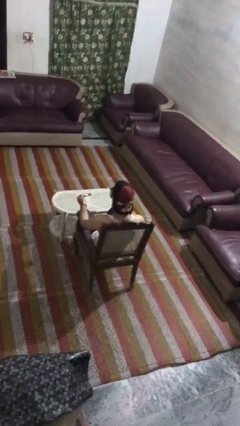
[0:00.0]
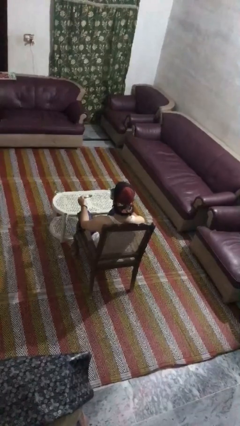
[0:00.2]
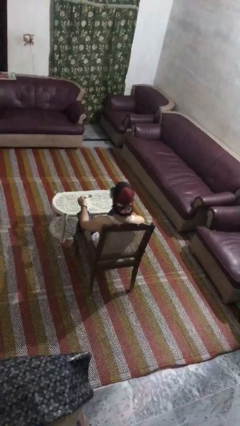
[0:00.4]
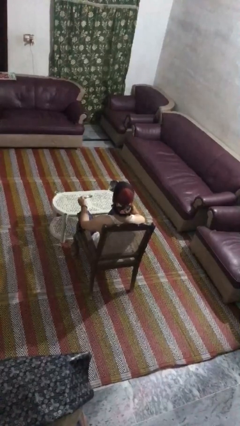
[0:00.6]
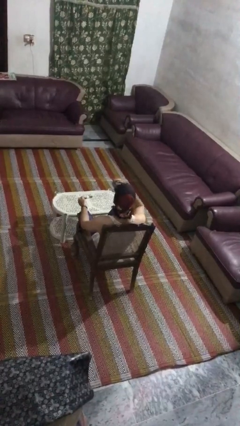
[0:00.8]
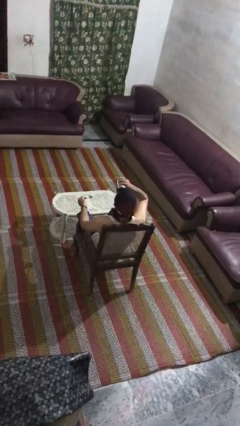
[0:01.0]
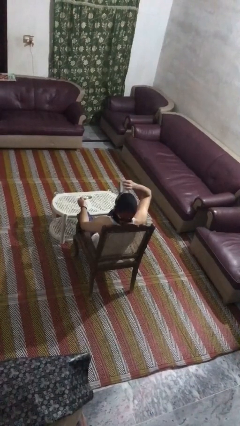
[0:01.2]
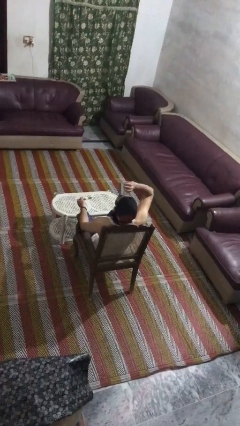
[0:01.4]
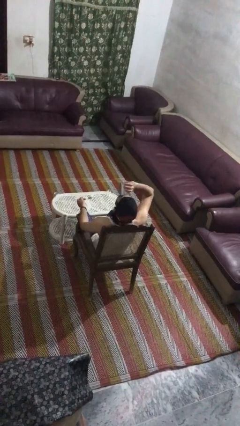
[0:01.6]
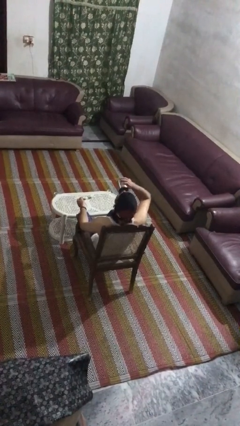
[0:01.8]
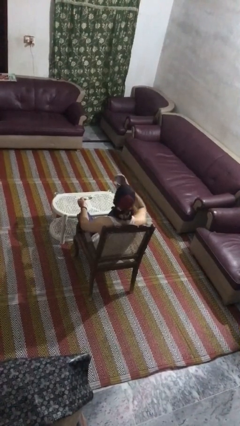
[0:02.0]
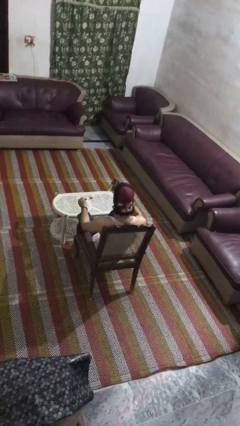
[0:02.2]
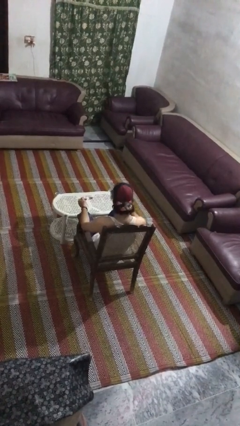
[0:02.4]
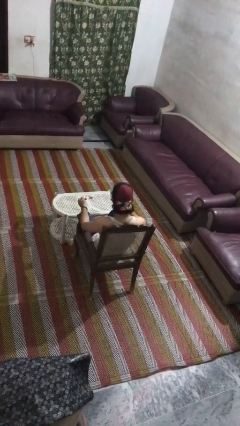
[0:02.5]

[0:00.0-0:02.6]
person drinks from mug

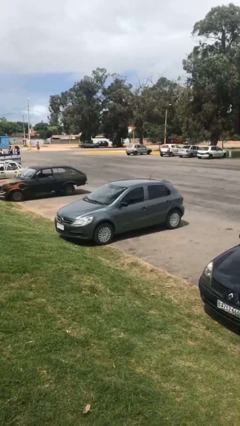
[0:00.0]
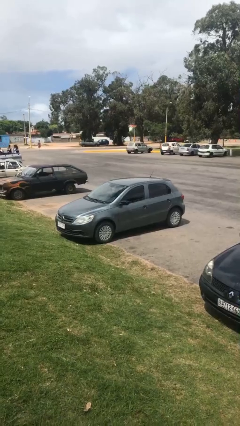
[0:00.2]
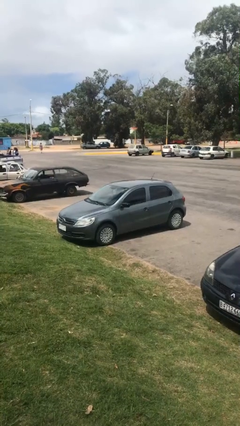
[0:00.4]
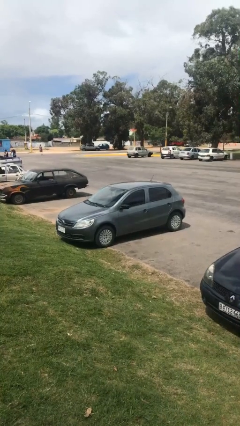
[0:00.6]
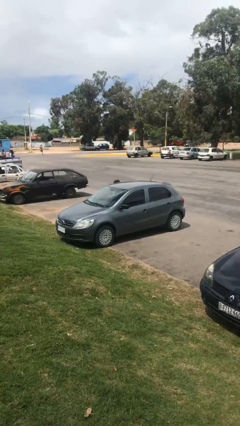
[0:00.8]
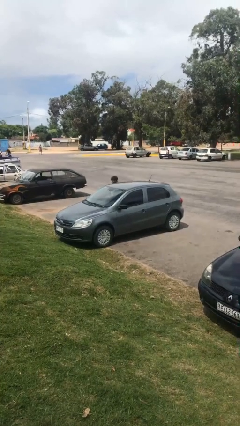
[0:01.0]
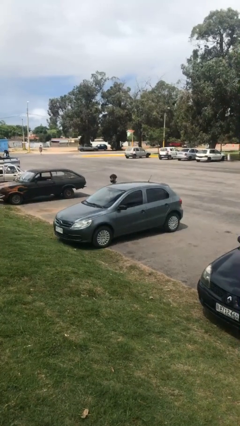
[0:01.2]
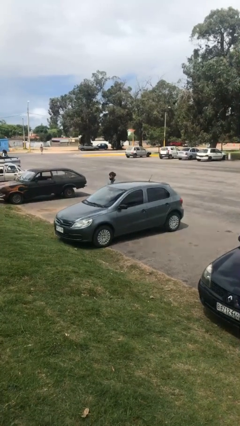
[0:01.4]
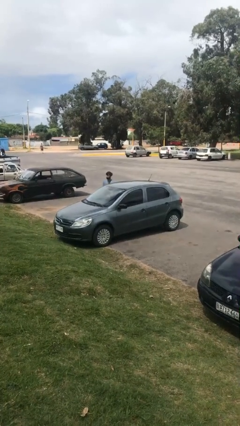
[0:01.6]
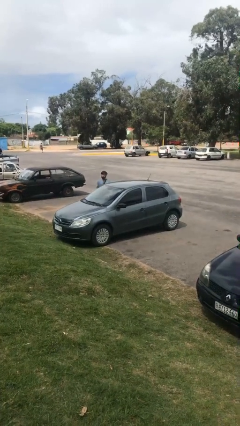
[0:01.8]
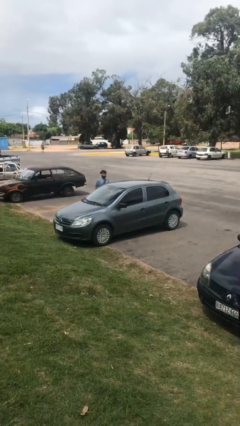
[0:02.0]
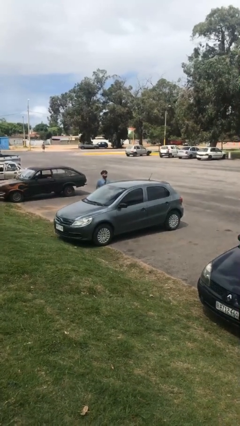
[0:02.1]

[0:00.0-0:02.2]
car drops off person

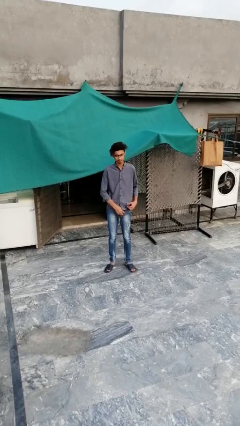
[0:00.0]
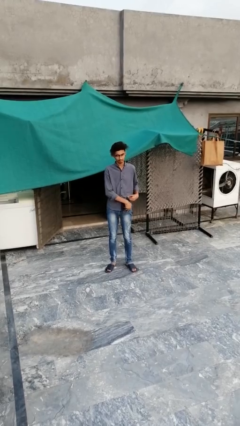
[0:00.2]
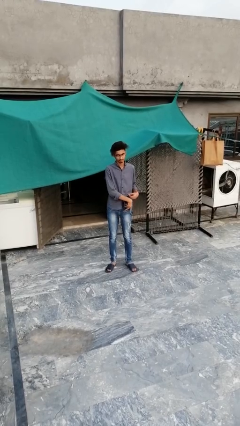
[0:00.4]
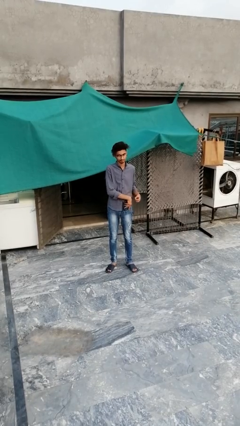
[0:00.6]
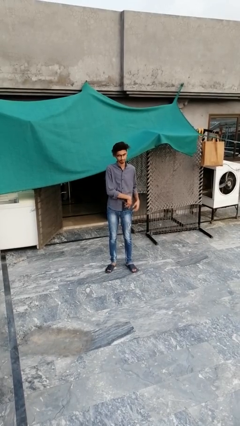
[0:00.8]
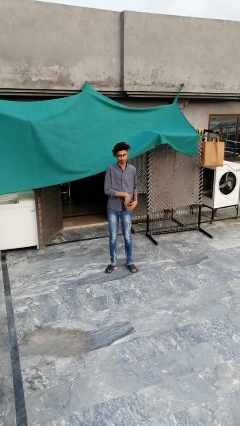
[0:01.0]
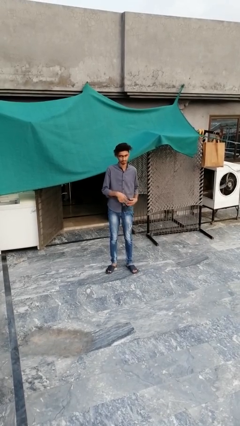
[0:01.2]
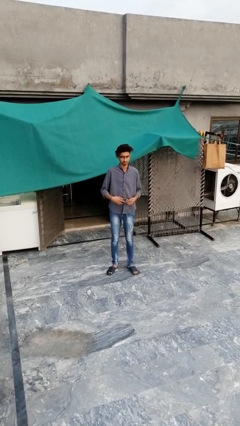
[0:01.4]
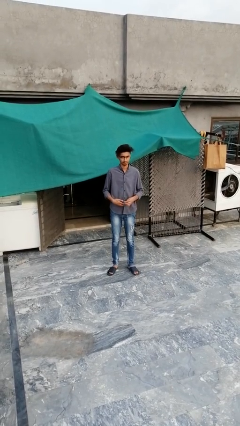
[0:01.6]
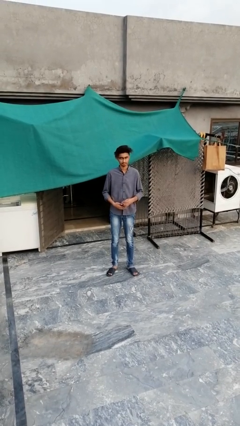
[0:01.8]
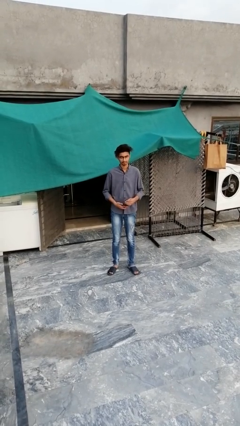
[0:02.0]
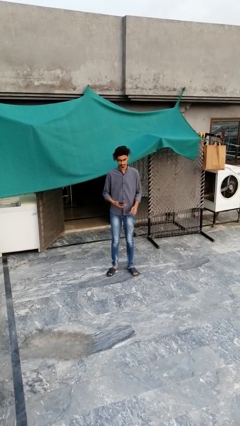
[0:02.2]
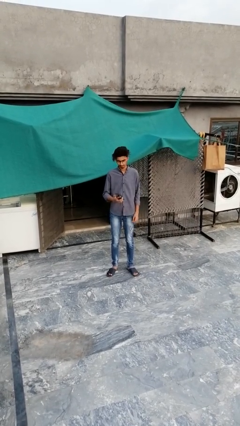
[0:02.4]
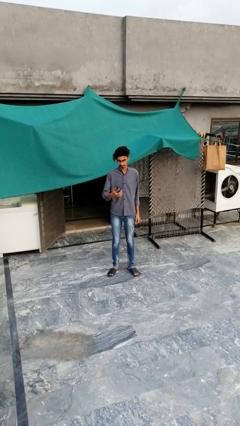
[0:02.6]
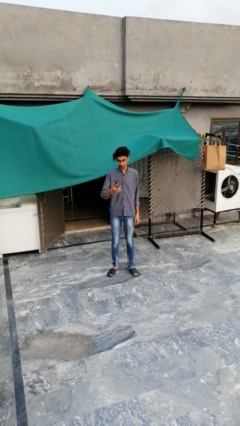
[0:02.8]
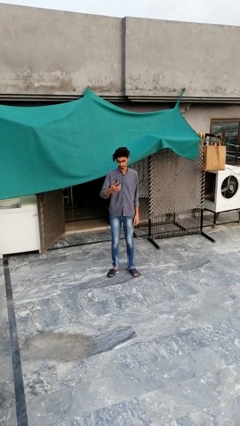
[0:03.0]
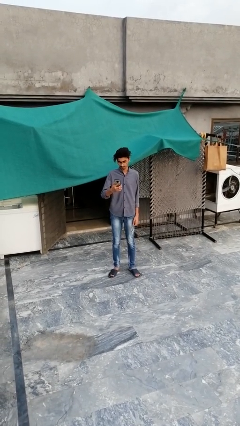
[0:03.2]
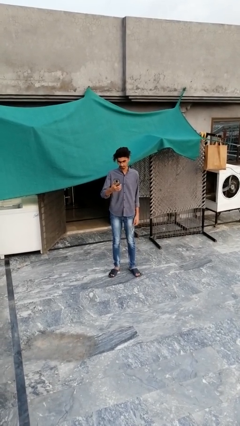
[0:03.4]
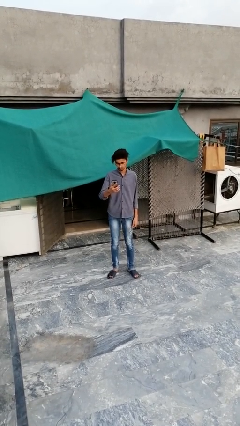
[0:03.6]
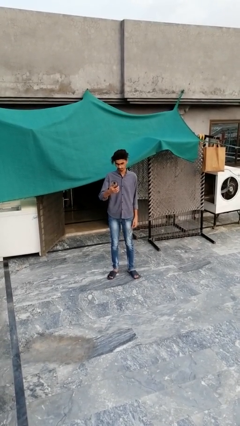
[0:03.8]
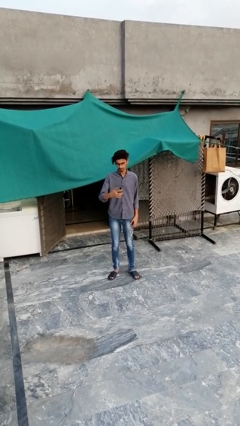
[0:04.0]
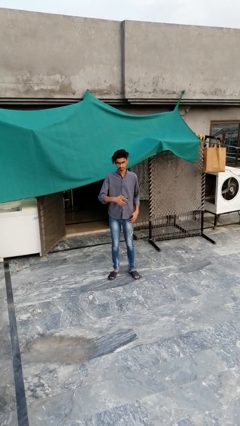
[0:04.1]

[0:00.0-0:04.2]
person takes phone from pocket

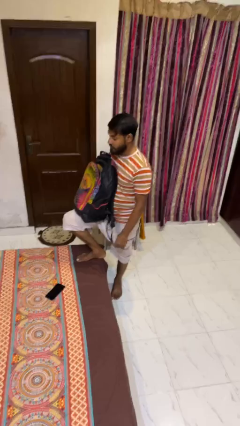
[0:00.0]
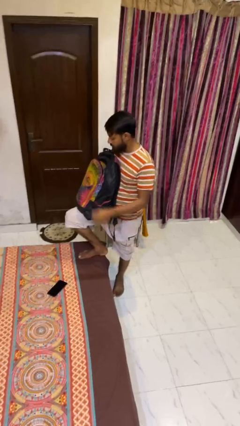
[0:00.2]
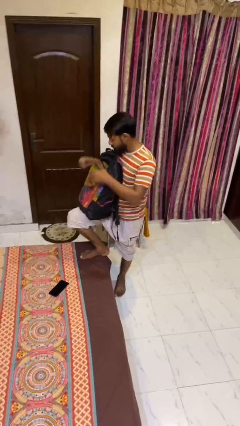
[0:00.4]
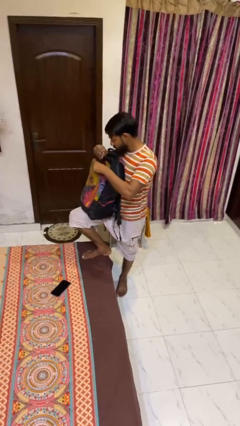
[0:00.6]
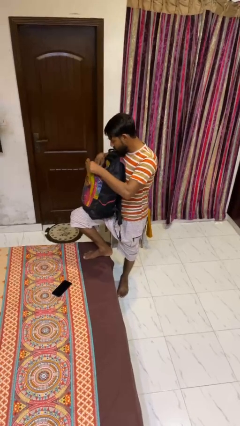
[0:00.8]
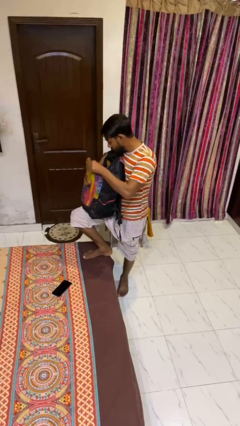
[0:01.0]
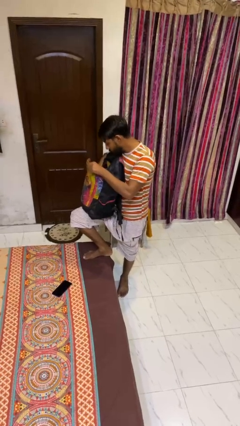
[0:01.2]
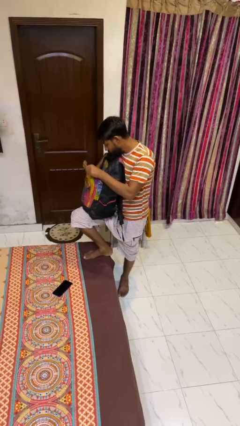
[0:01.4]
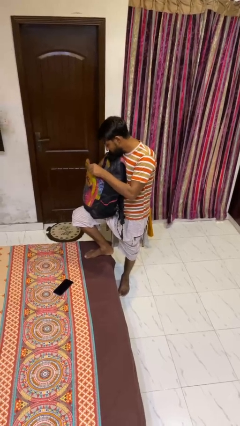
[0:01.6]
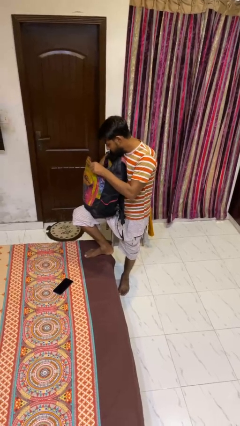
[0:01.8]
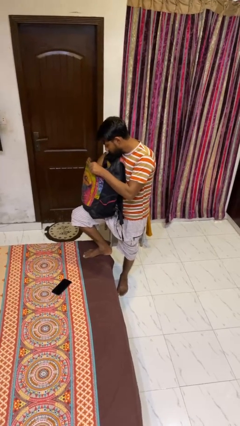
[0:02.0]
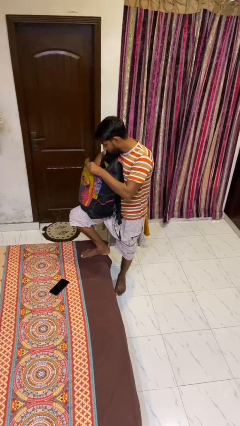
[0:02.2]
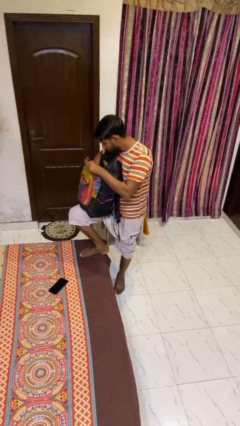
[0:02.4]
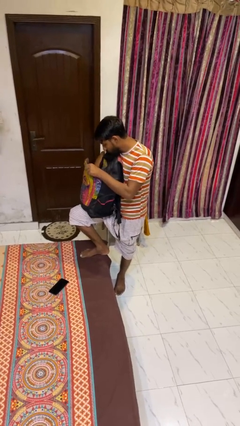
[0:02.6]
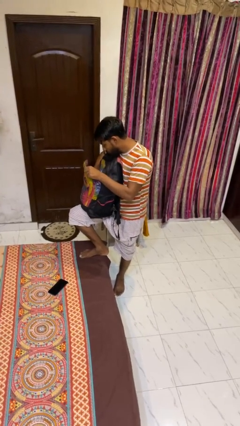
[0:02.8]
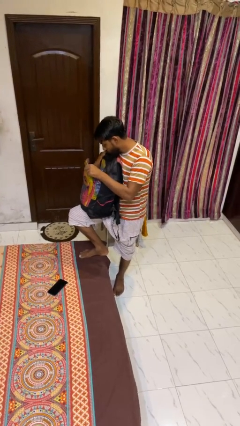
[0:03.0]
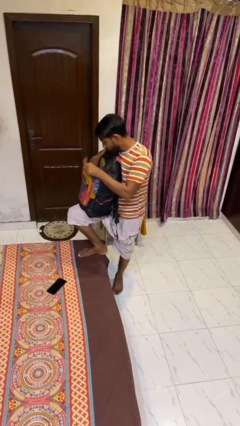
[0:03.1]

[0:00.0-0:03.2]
person searches in backpack

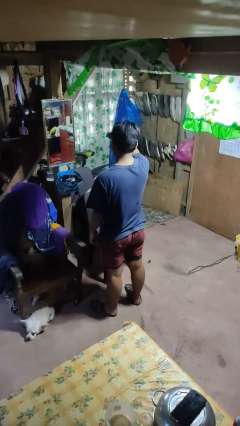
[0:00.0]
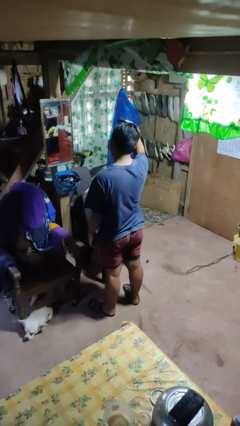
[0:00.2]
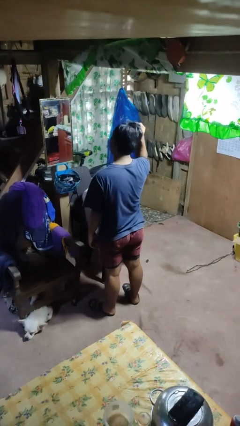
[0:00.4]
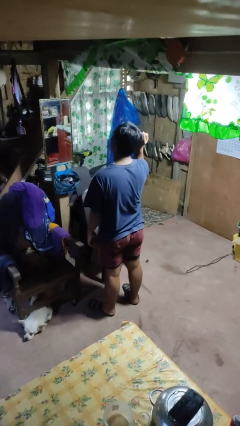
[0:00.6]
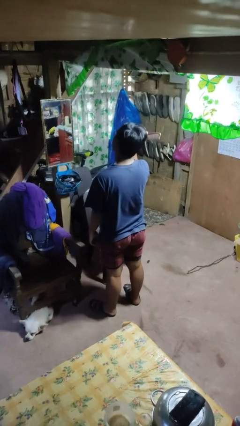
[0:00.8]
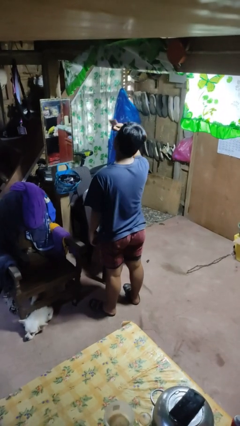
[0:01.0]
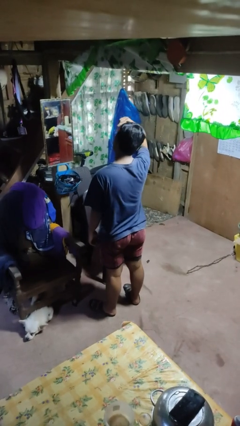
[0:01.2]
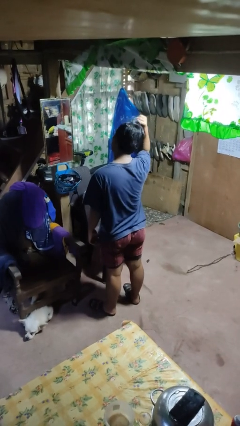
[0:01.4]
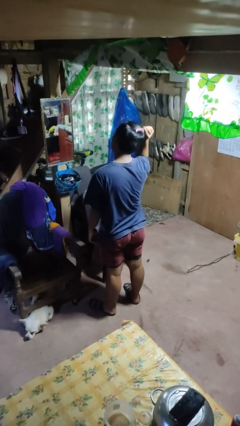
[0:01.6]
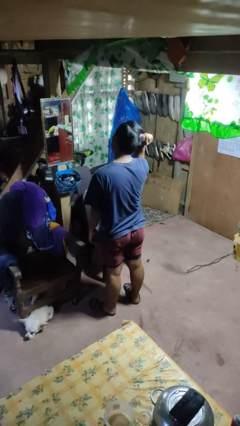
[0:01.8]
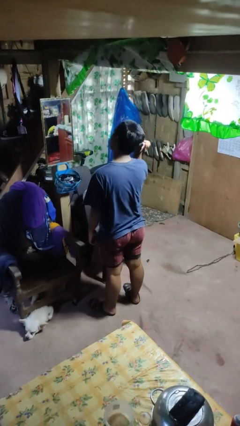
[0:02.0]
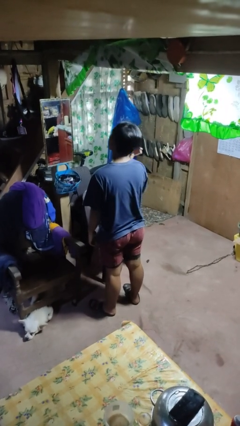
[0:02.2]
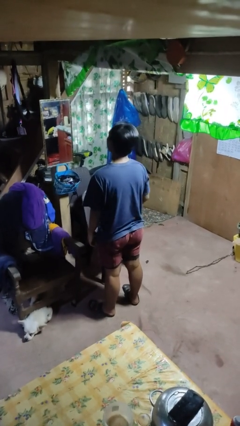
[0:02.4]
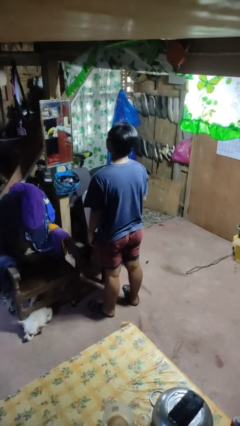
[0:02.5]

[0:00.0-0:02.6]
person brushes hair

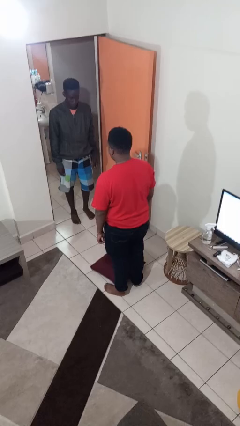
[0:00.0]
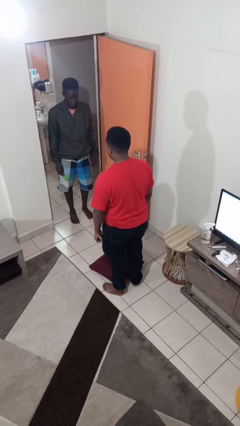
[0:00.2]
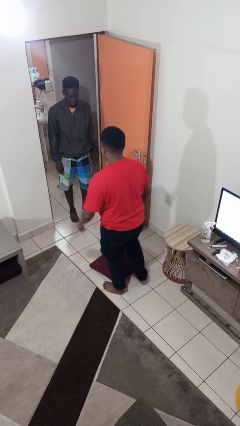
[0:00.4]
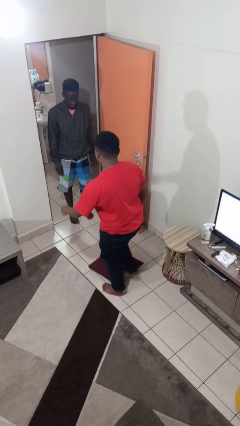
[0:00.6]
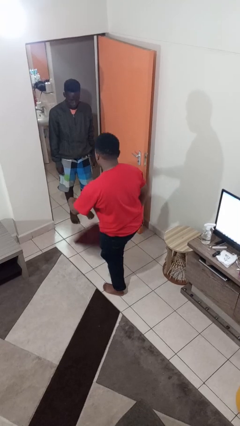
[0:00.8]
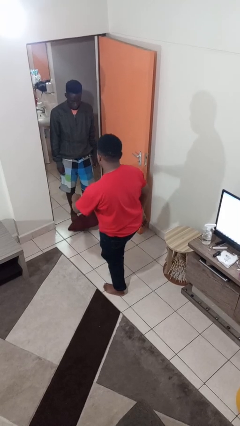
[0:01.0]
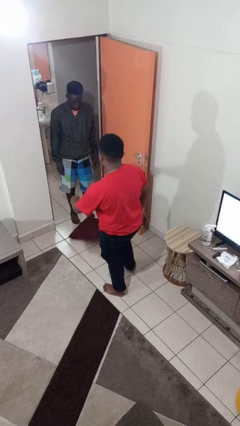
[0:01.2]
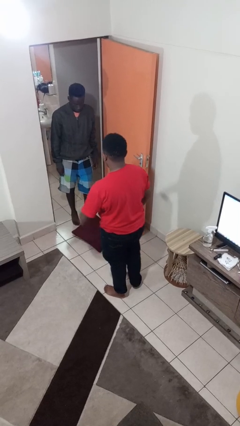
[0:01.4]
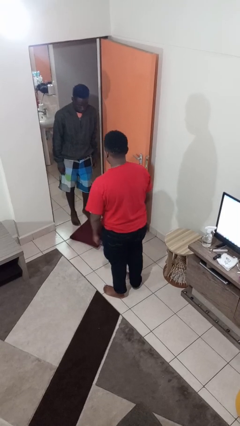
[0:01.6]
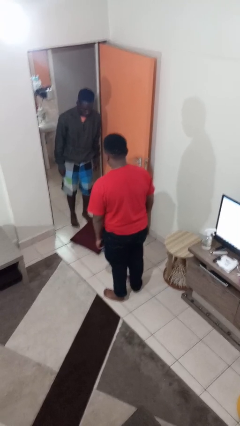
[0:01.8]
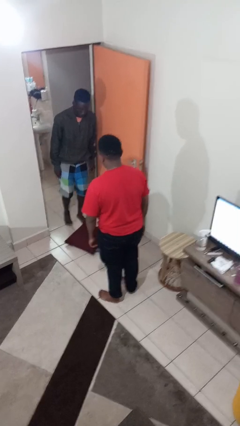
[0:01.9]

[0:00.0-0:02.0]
person kicks object to person

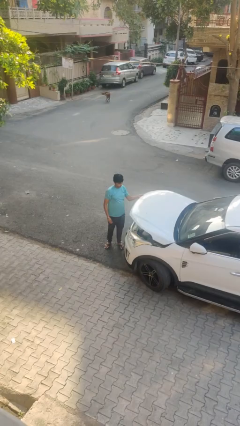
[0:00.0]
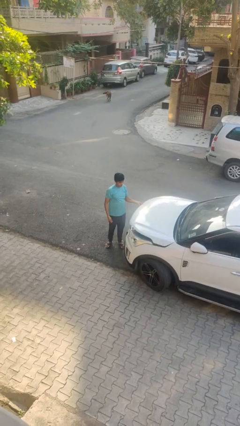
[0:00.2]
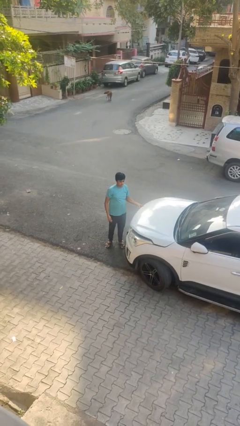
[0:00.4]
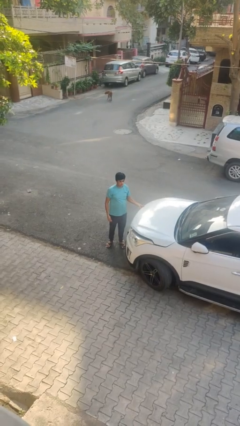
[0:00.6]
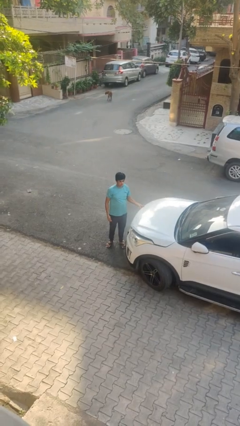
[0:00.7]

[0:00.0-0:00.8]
person closes car hood
